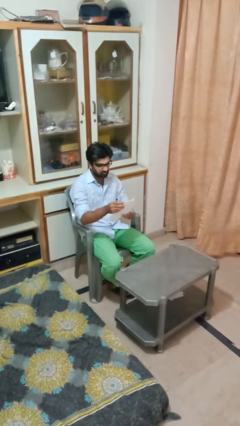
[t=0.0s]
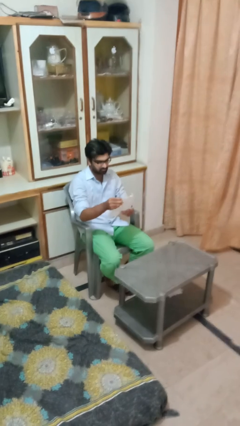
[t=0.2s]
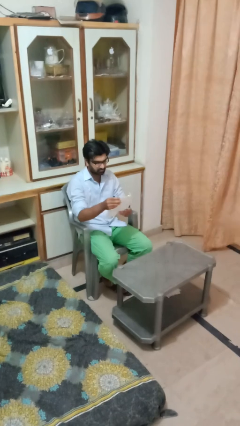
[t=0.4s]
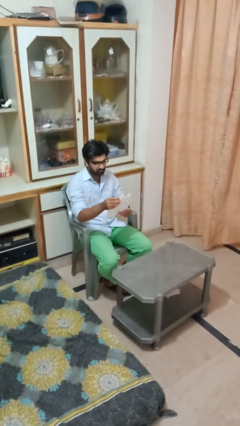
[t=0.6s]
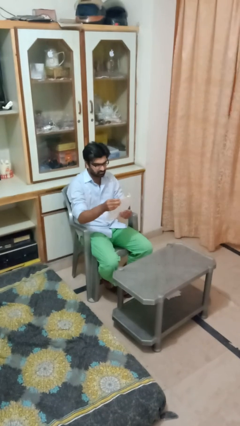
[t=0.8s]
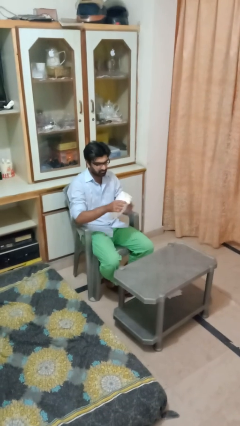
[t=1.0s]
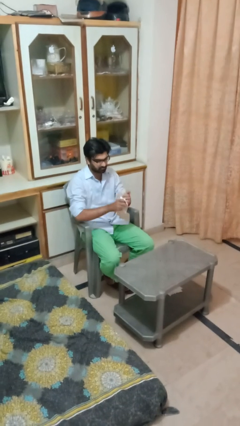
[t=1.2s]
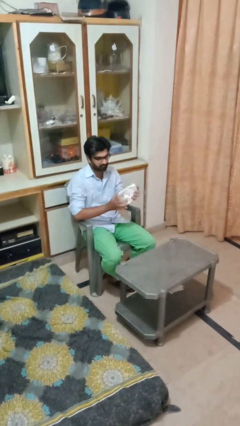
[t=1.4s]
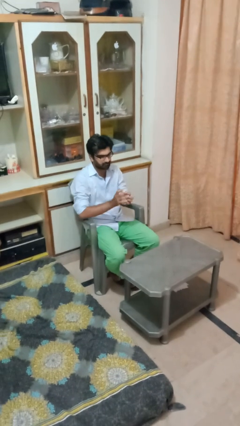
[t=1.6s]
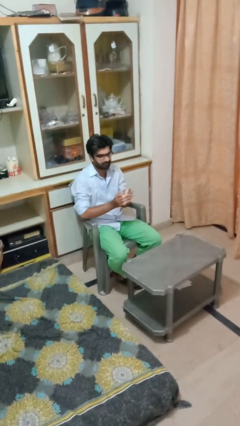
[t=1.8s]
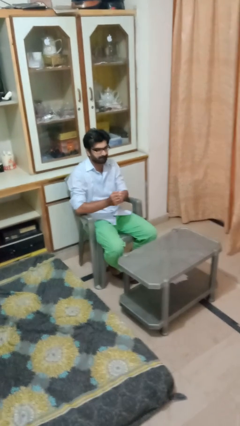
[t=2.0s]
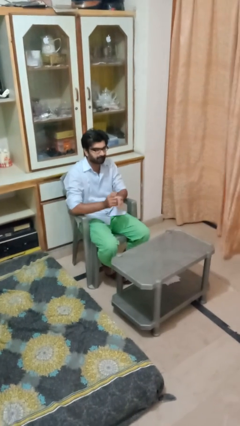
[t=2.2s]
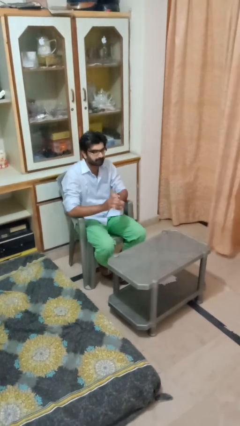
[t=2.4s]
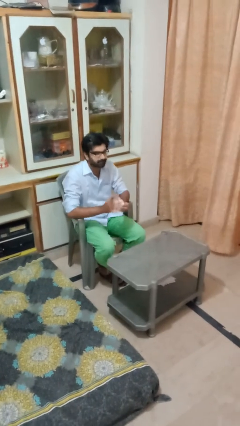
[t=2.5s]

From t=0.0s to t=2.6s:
person crumples paper

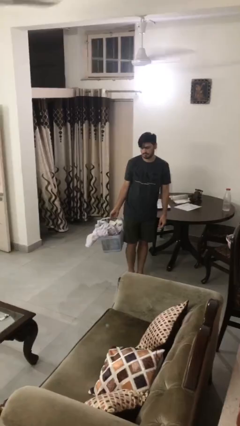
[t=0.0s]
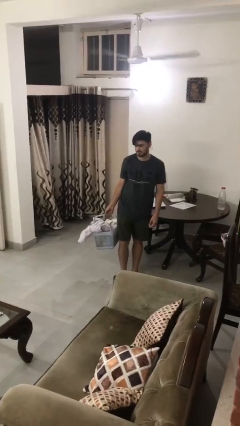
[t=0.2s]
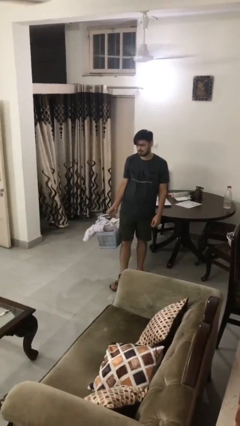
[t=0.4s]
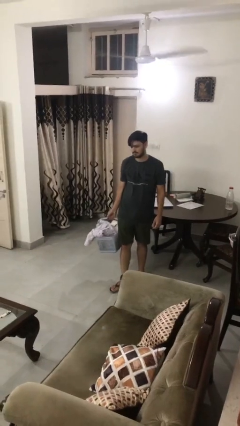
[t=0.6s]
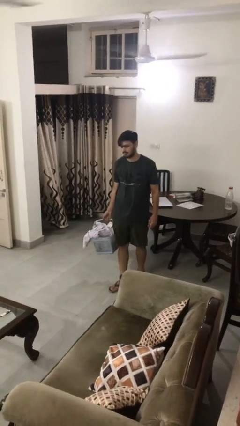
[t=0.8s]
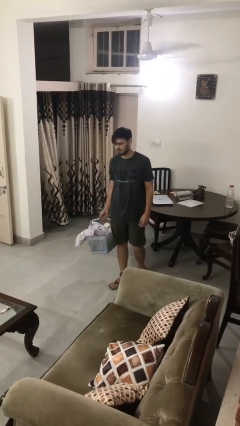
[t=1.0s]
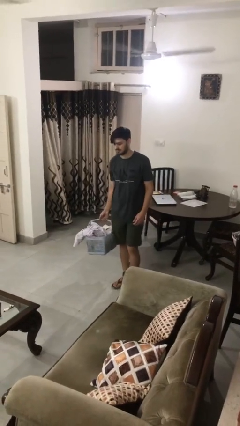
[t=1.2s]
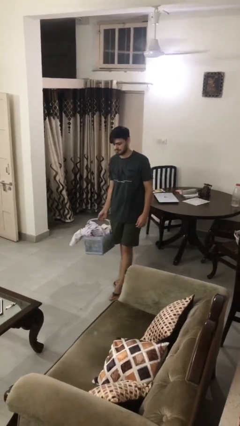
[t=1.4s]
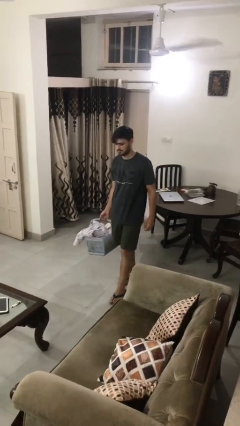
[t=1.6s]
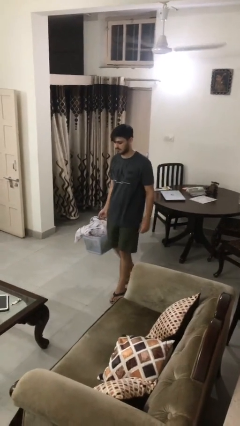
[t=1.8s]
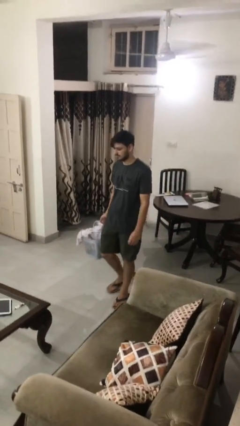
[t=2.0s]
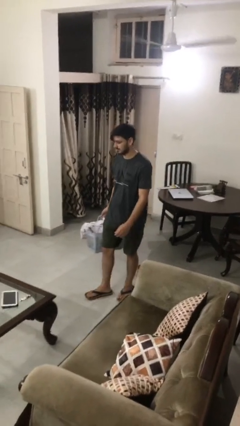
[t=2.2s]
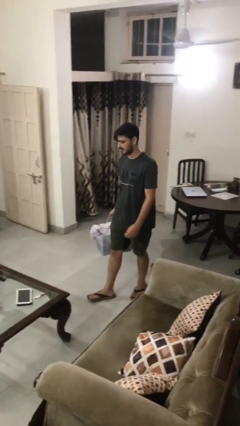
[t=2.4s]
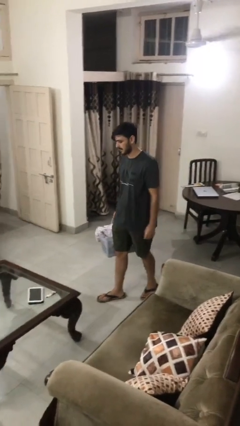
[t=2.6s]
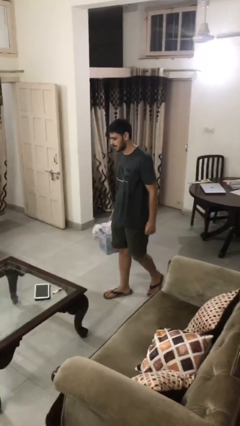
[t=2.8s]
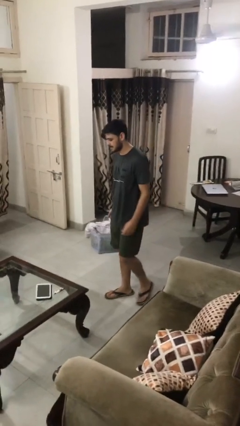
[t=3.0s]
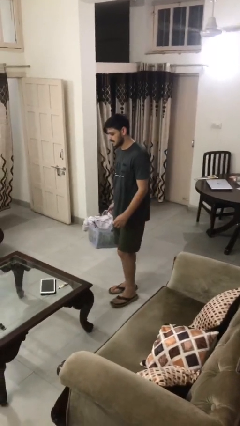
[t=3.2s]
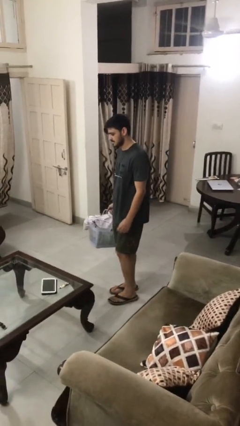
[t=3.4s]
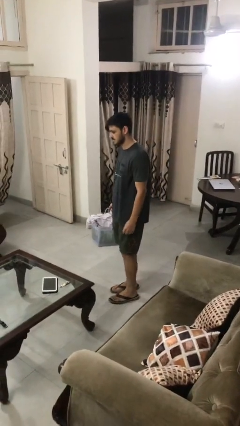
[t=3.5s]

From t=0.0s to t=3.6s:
person carries laundry basket

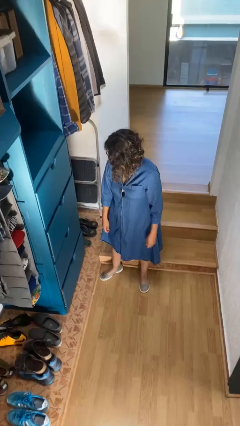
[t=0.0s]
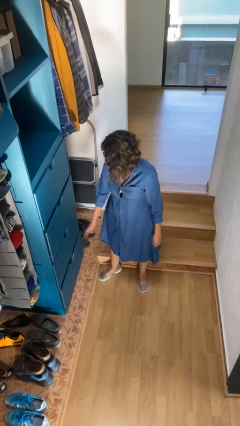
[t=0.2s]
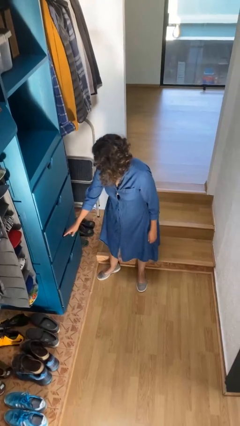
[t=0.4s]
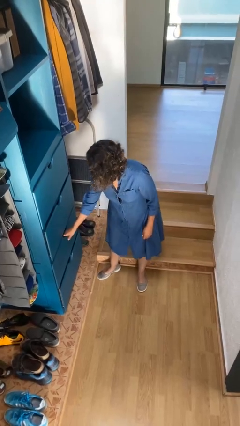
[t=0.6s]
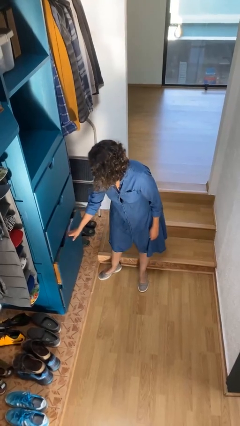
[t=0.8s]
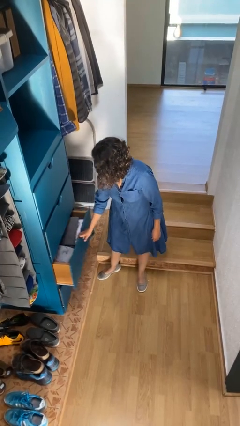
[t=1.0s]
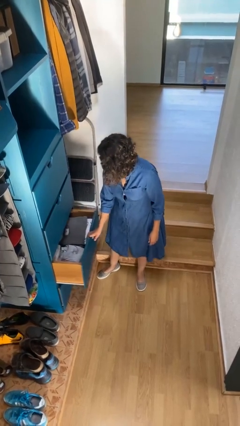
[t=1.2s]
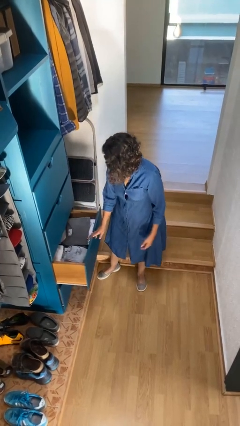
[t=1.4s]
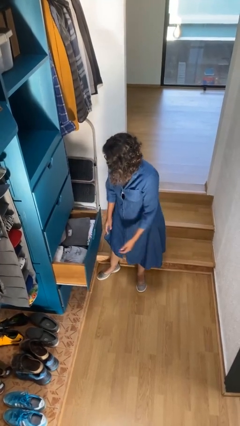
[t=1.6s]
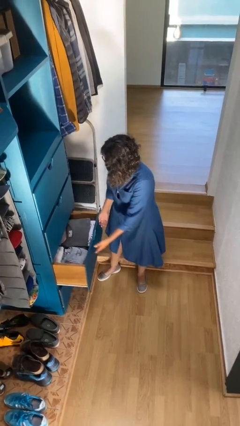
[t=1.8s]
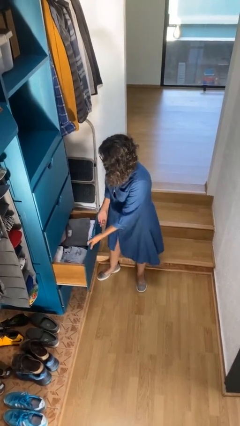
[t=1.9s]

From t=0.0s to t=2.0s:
person opens dresser drawer

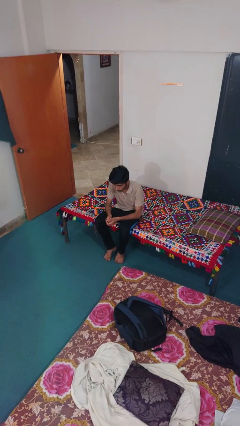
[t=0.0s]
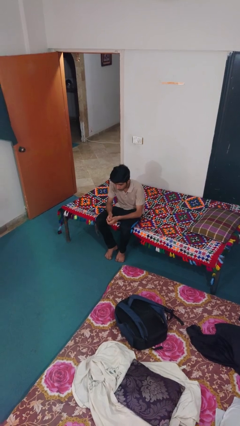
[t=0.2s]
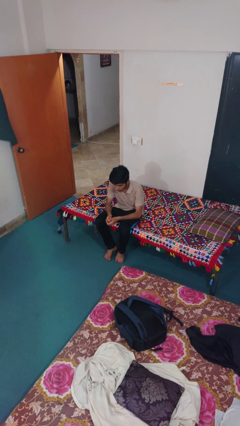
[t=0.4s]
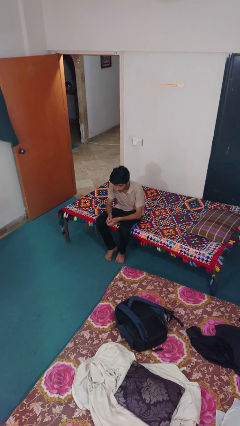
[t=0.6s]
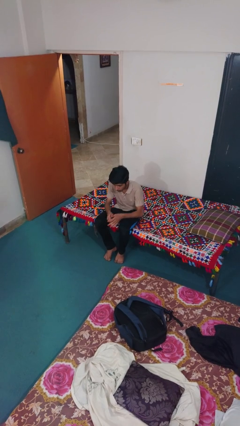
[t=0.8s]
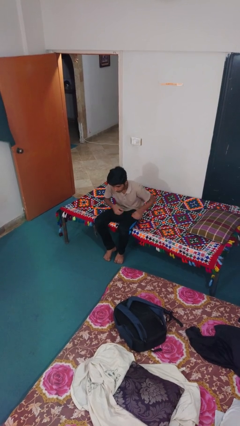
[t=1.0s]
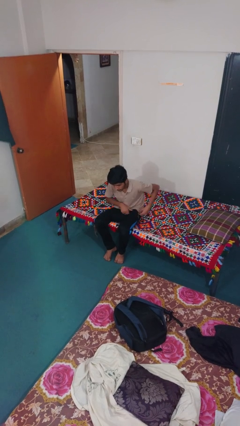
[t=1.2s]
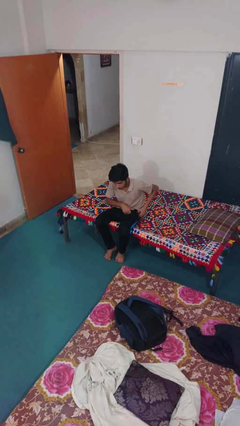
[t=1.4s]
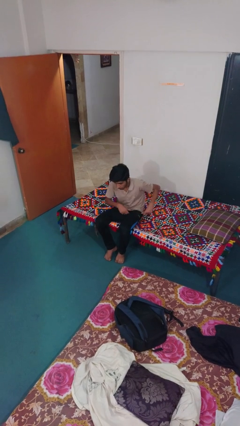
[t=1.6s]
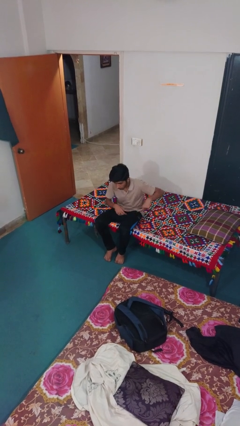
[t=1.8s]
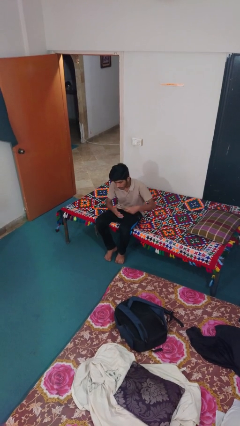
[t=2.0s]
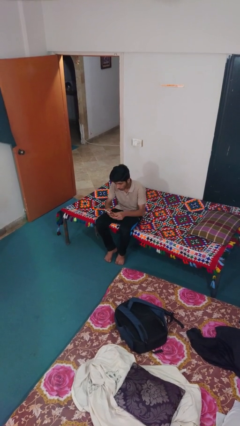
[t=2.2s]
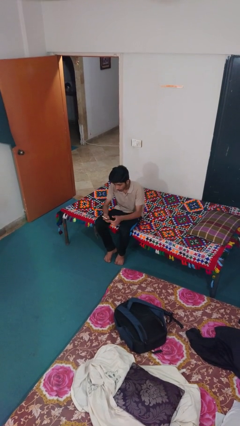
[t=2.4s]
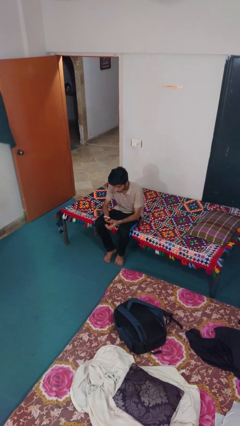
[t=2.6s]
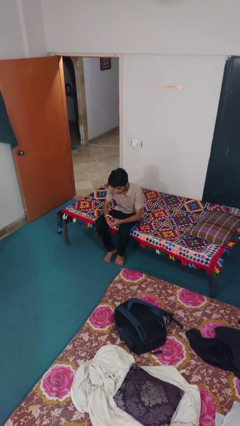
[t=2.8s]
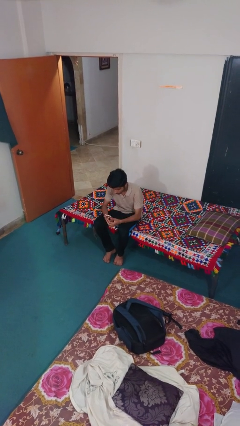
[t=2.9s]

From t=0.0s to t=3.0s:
person takes phone from pocket

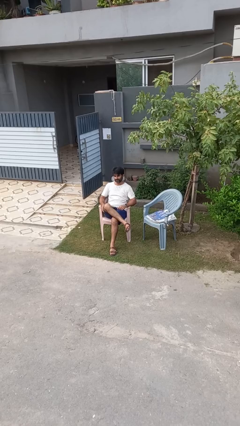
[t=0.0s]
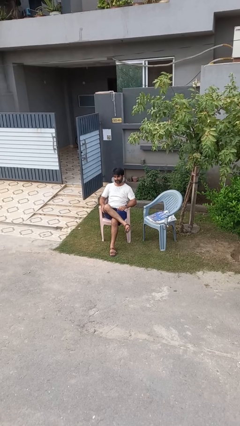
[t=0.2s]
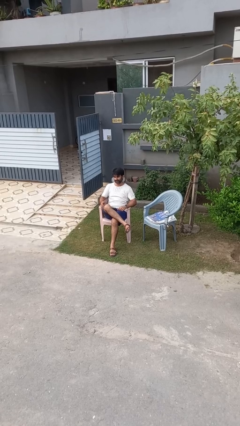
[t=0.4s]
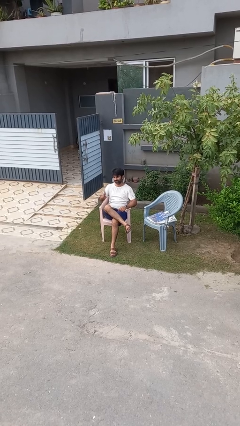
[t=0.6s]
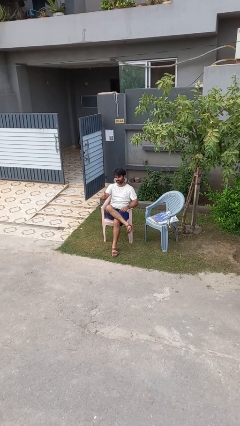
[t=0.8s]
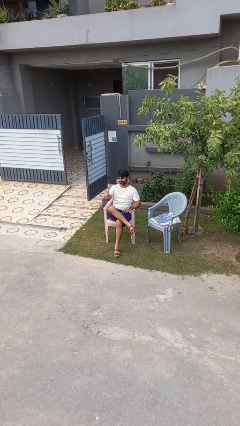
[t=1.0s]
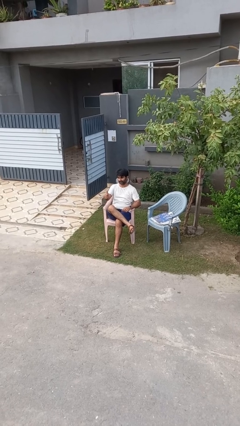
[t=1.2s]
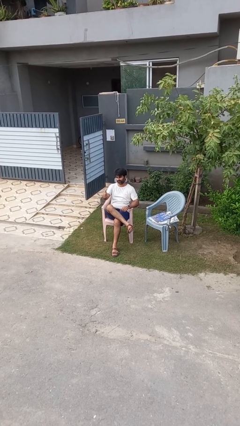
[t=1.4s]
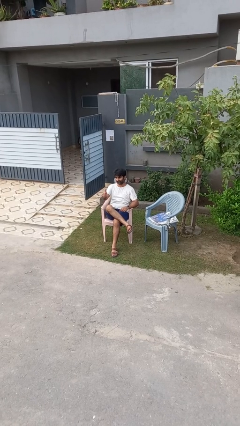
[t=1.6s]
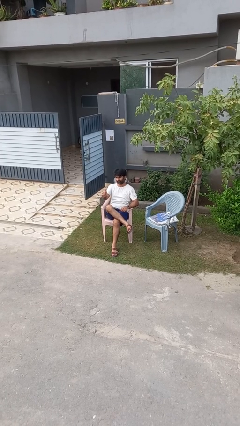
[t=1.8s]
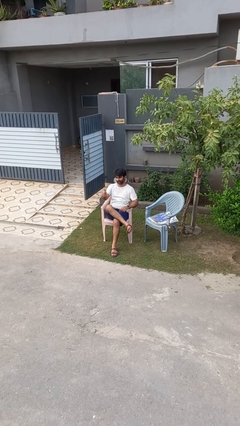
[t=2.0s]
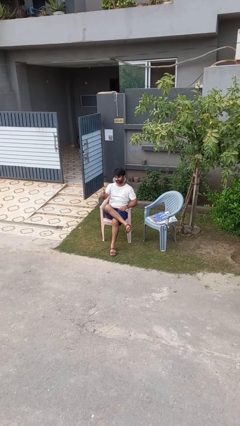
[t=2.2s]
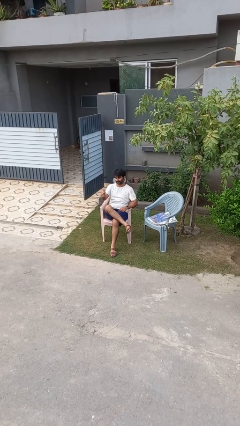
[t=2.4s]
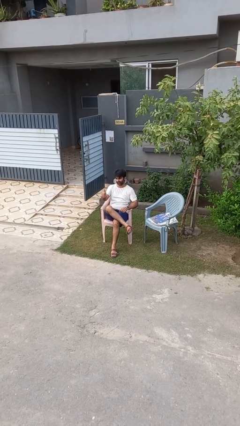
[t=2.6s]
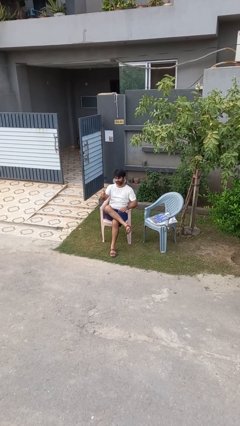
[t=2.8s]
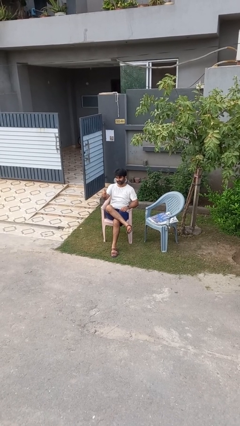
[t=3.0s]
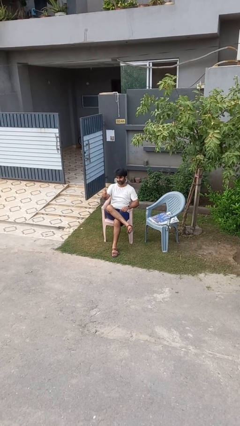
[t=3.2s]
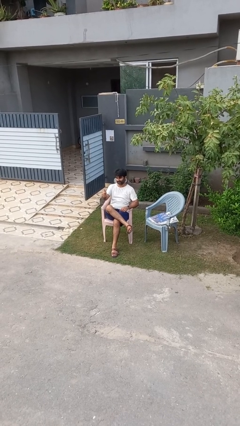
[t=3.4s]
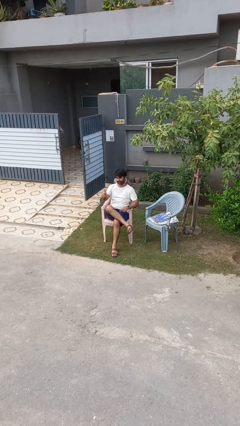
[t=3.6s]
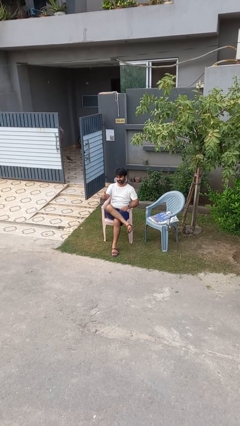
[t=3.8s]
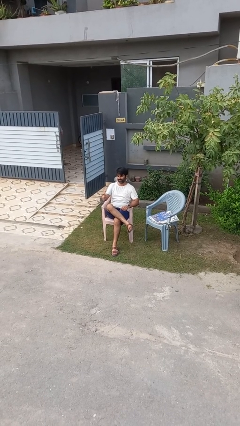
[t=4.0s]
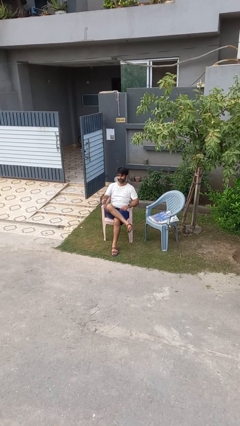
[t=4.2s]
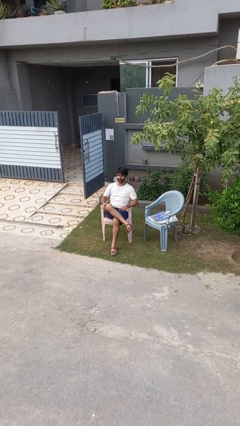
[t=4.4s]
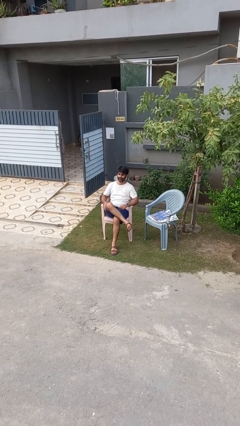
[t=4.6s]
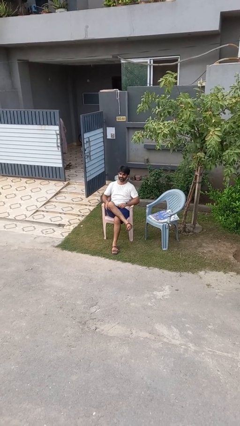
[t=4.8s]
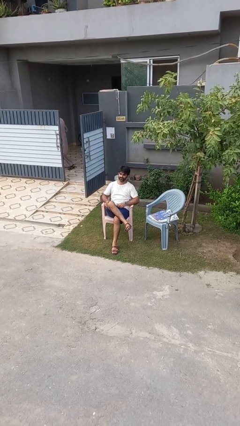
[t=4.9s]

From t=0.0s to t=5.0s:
person gestures thumbs up

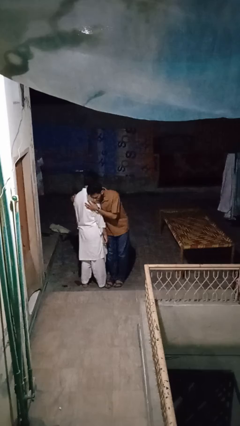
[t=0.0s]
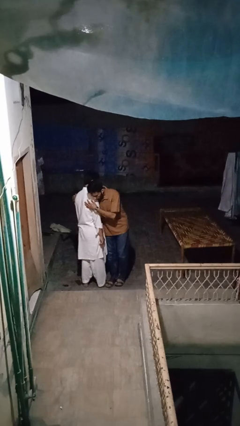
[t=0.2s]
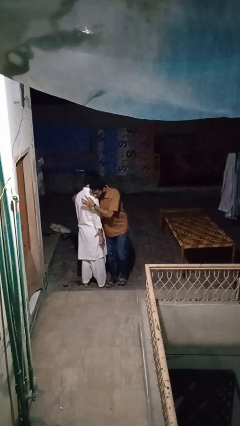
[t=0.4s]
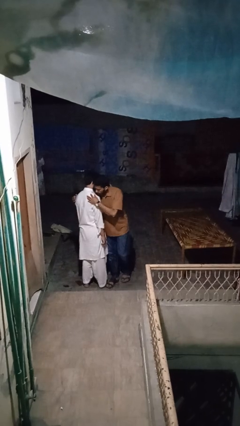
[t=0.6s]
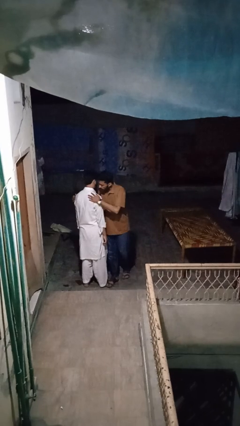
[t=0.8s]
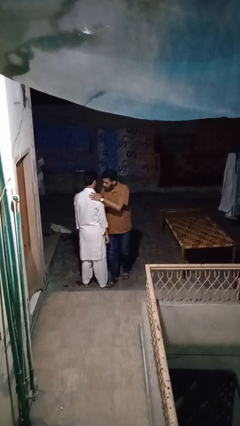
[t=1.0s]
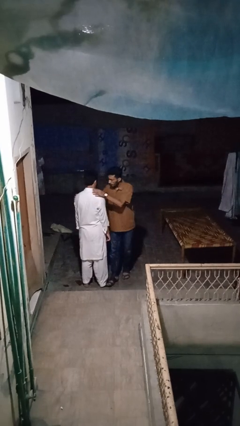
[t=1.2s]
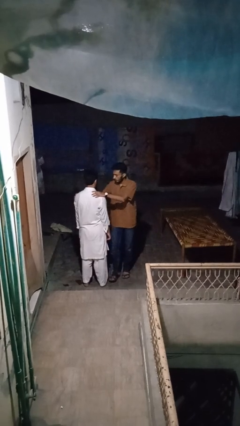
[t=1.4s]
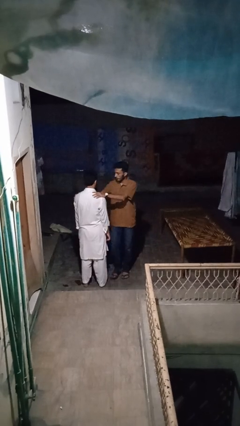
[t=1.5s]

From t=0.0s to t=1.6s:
person bumps into person
